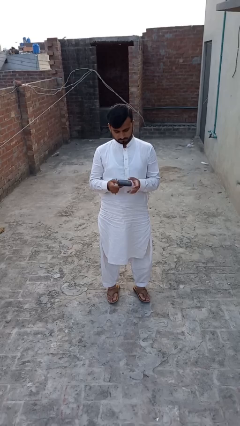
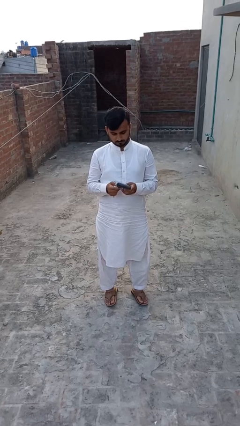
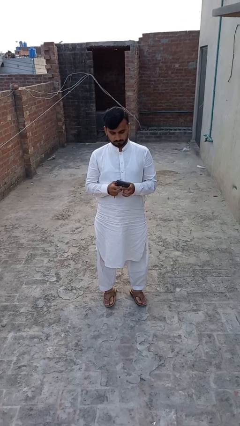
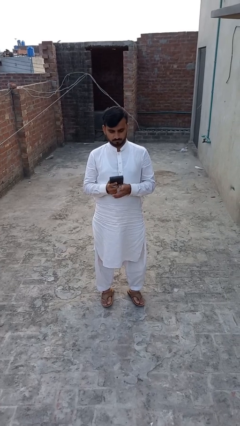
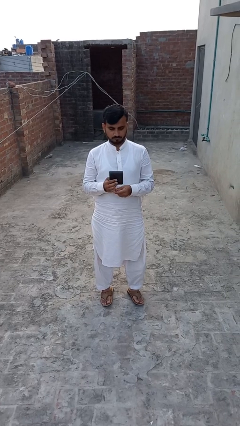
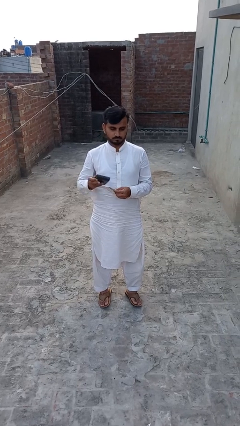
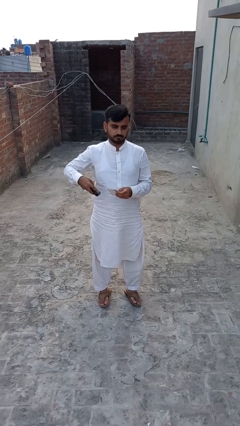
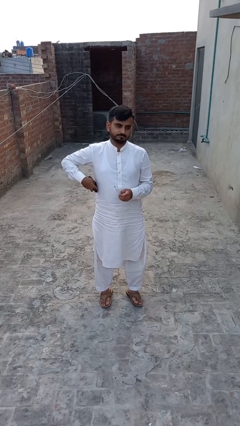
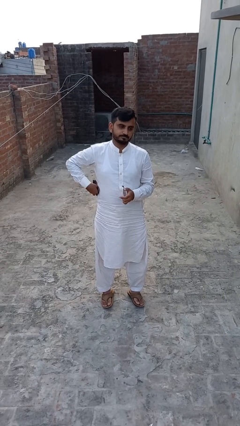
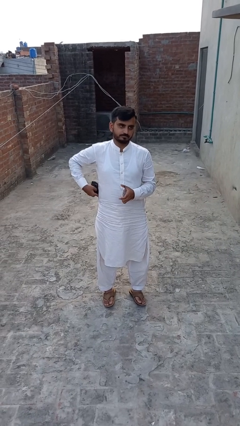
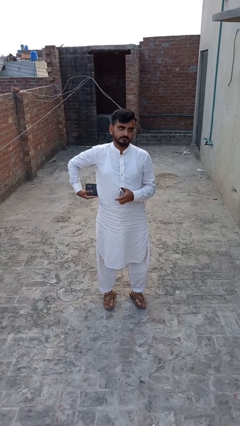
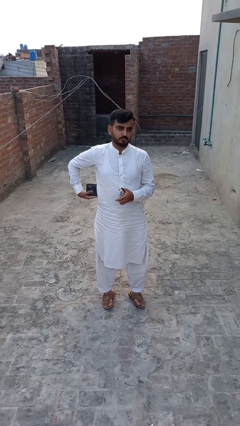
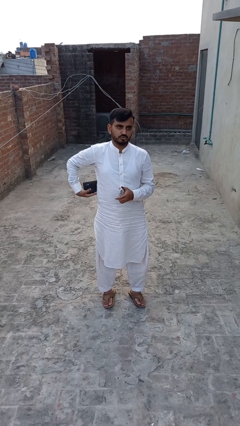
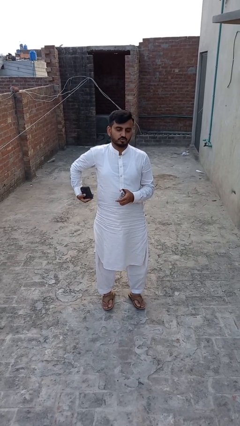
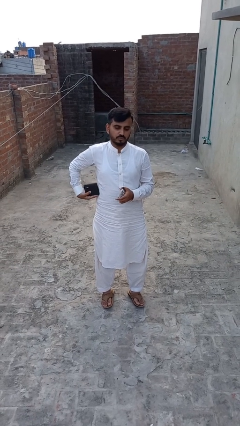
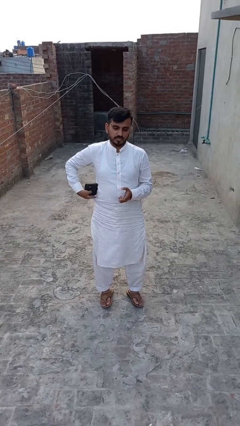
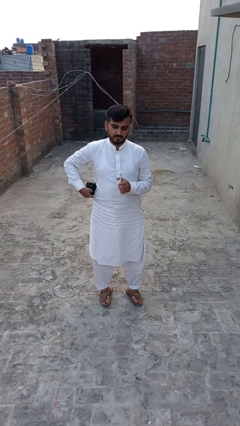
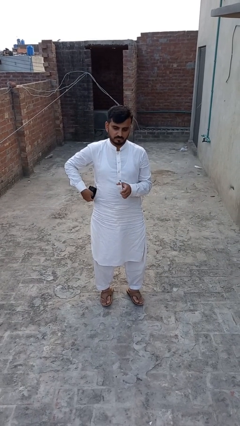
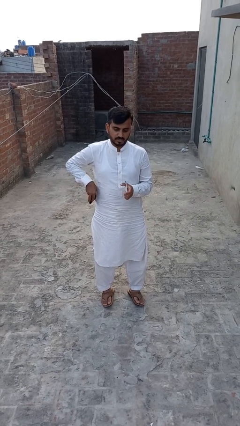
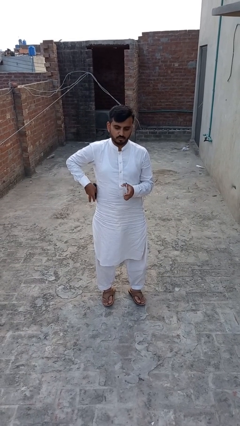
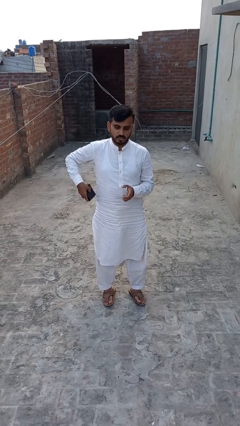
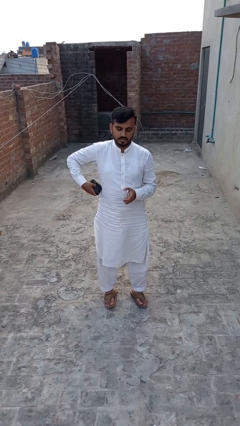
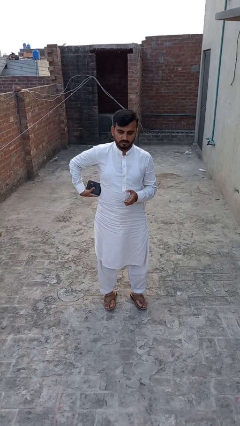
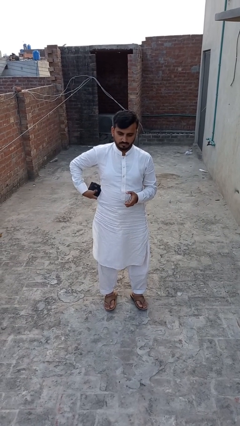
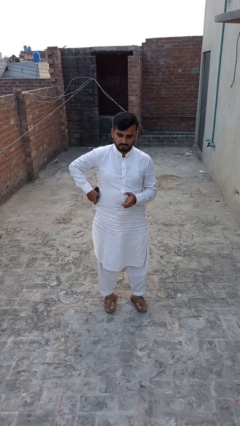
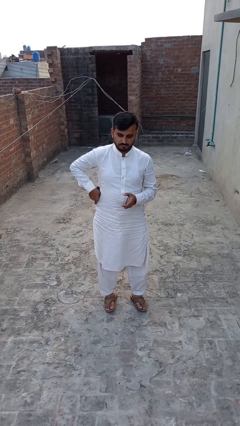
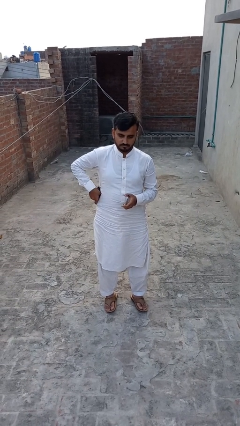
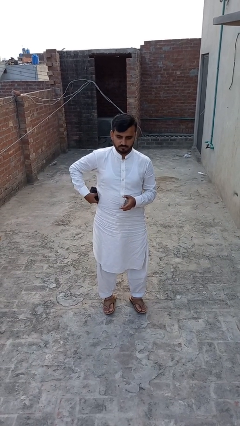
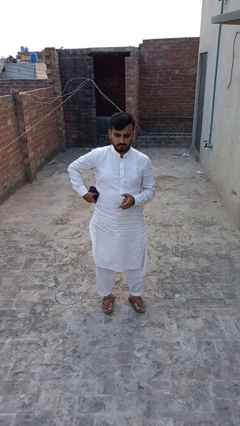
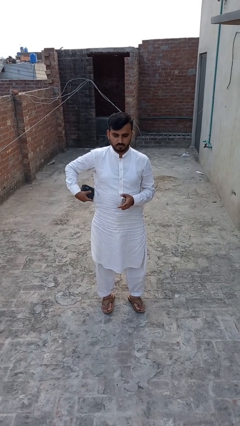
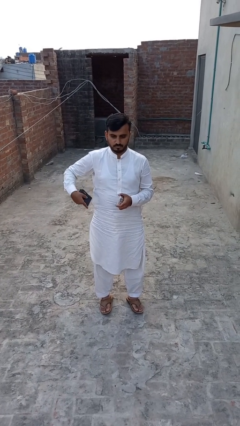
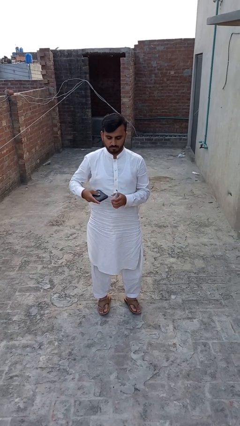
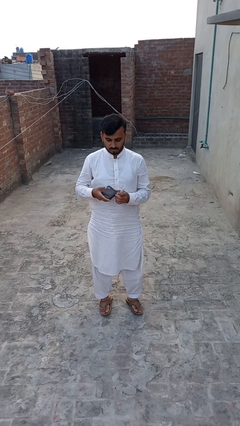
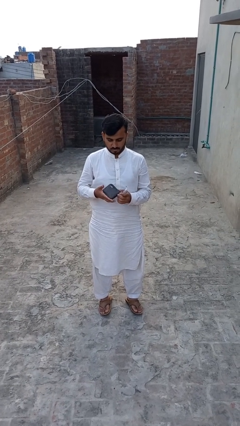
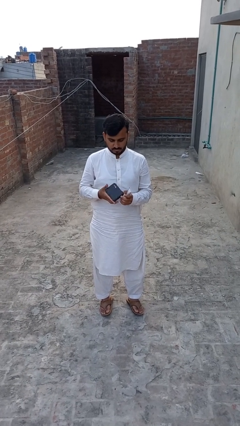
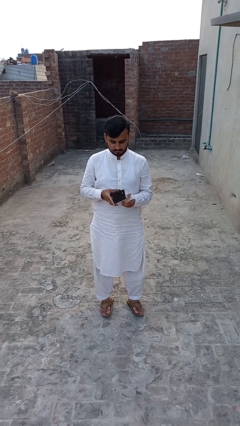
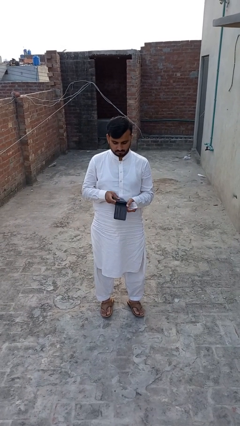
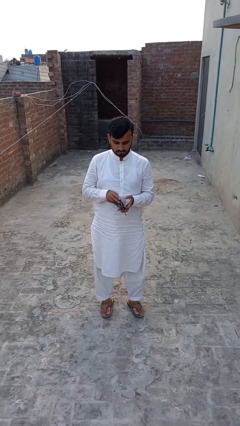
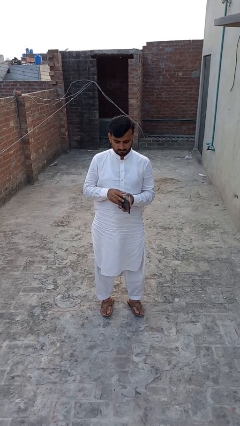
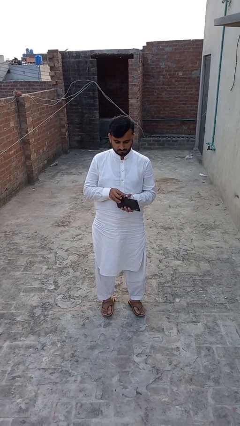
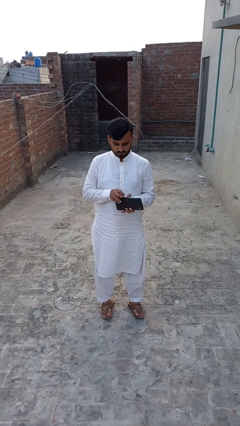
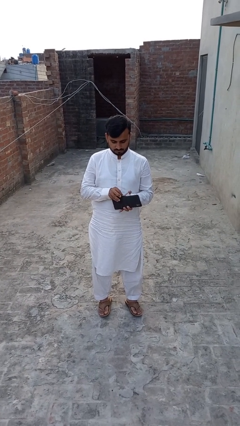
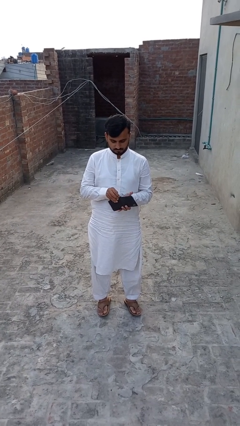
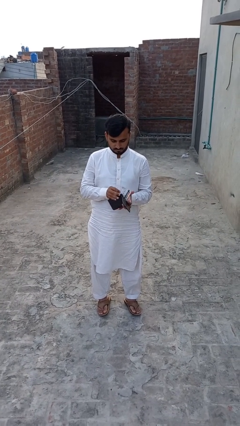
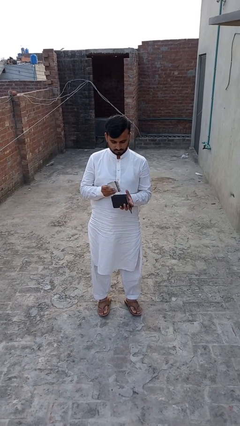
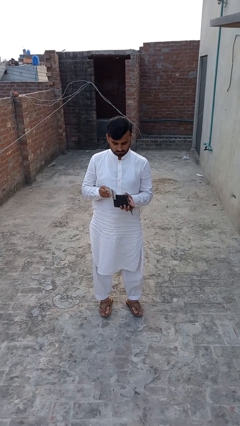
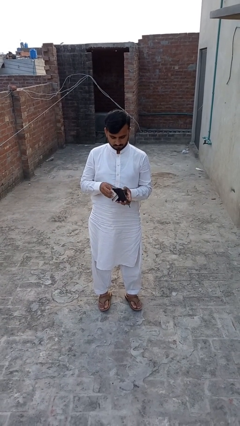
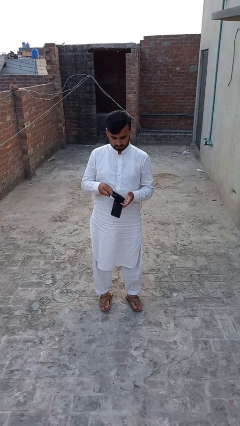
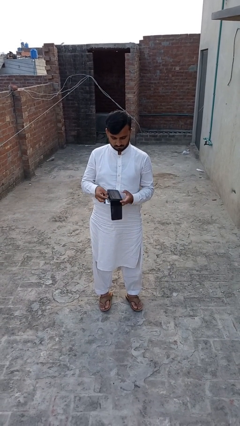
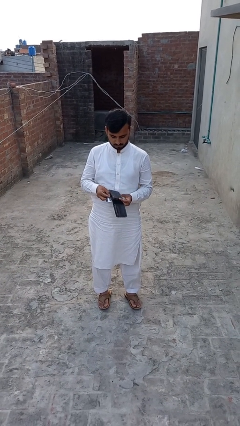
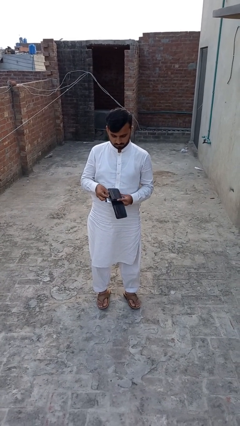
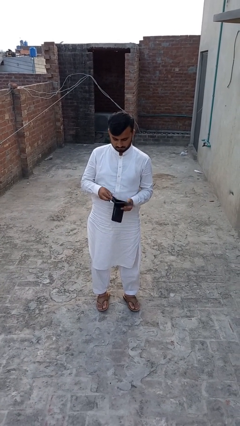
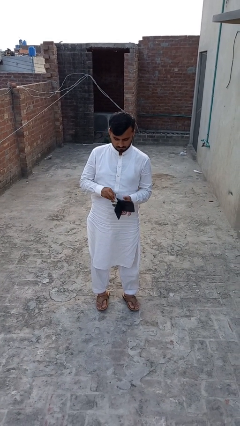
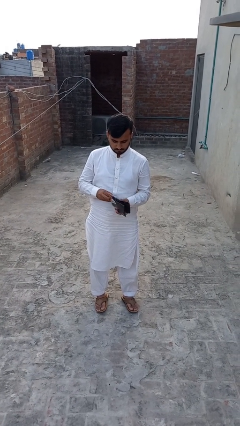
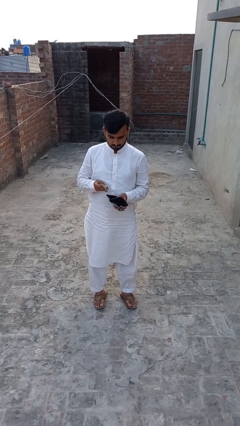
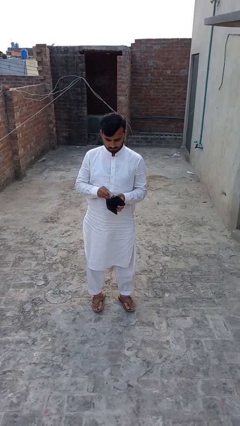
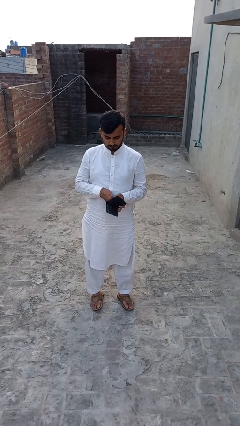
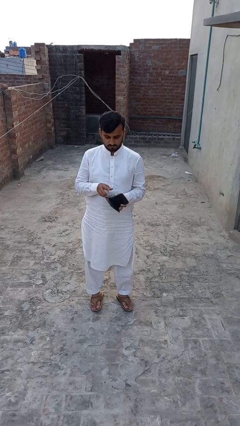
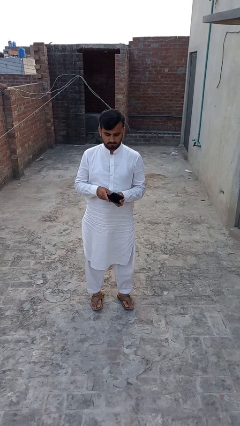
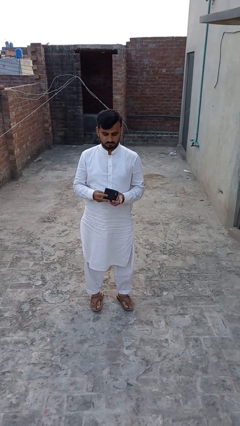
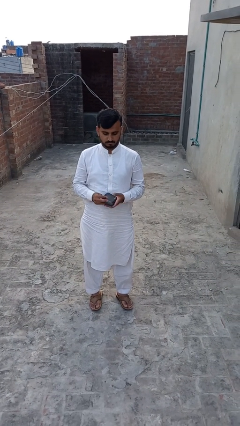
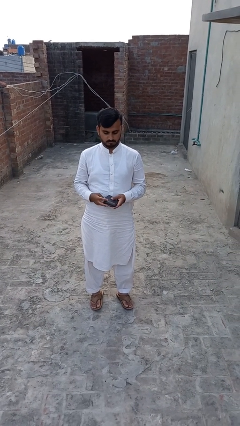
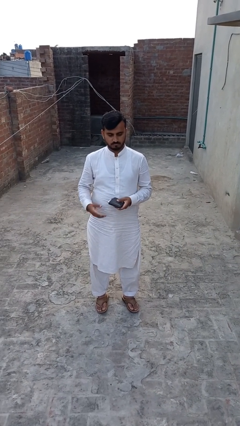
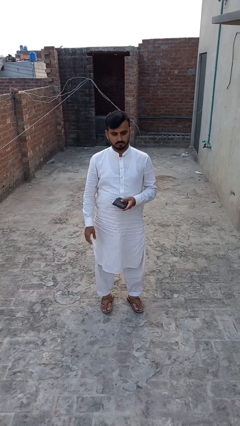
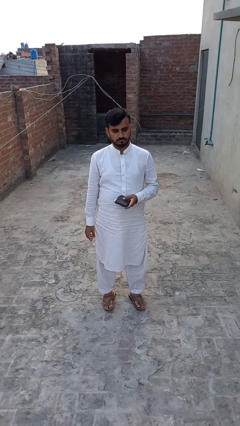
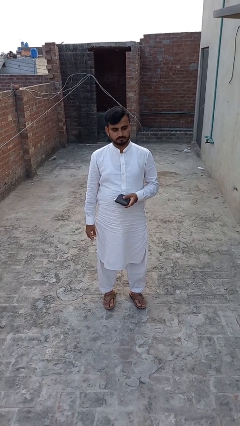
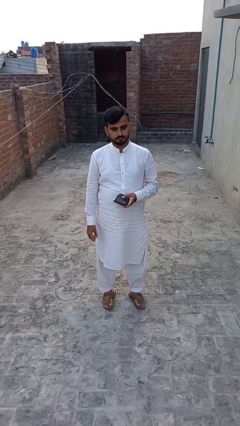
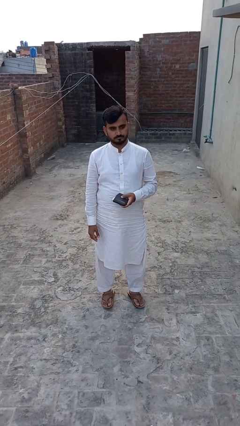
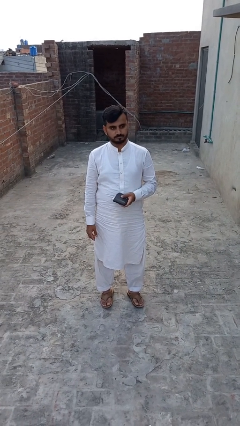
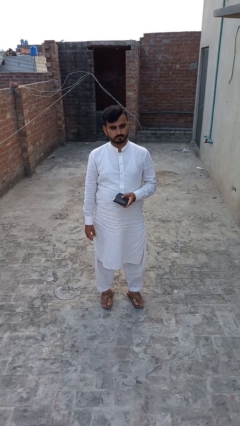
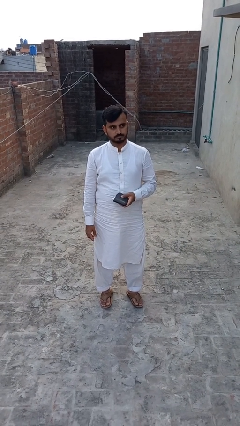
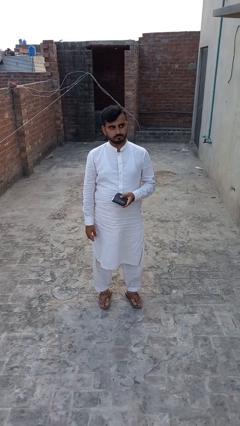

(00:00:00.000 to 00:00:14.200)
person puts object into purse

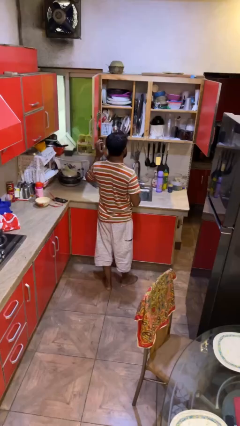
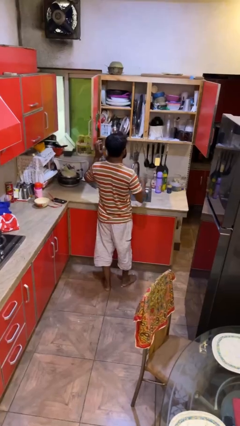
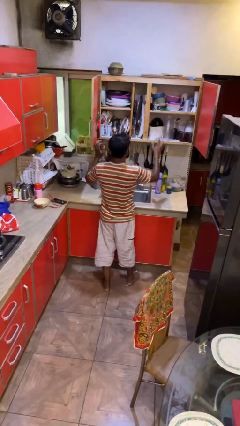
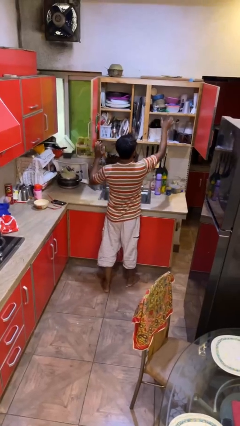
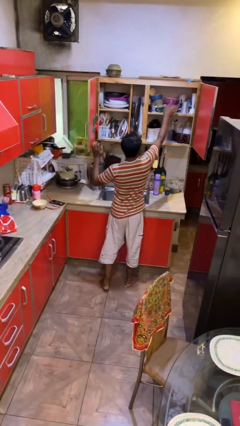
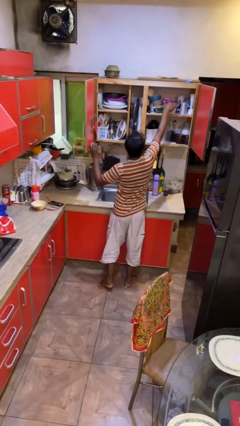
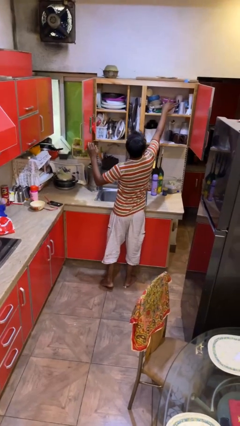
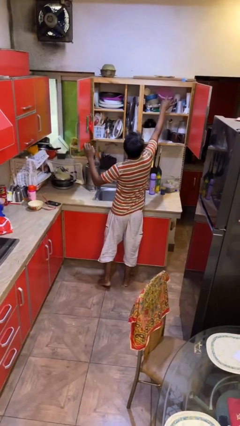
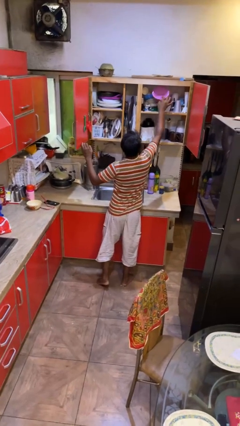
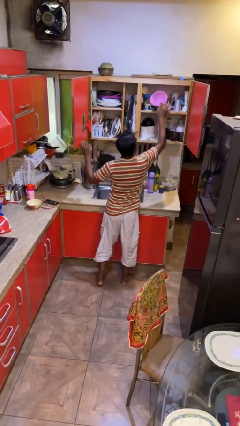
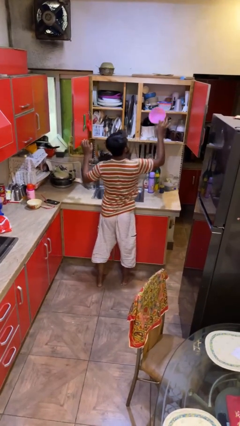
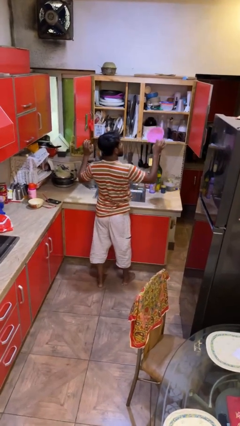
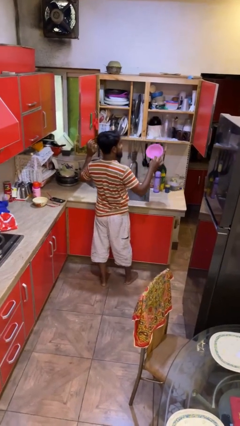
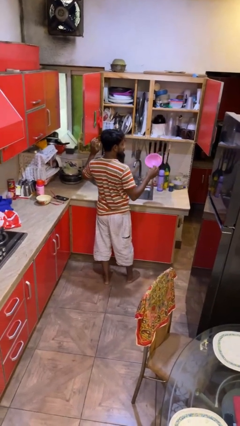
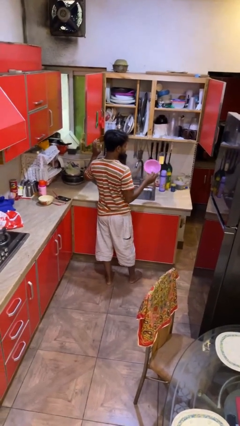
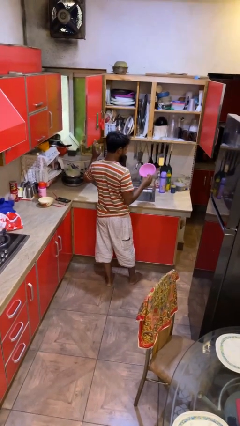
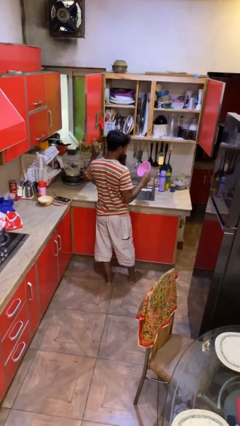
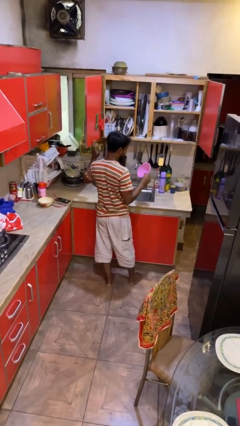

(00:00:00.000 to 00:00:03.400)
person picks up object from cabinet

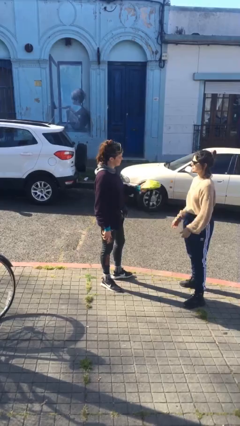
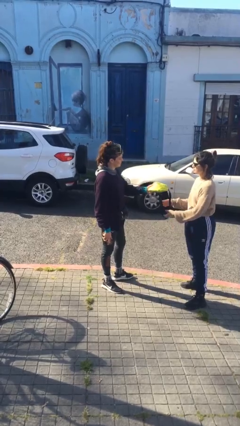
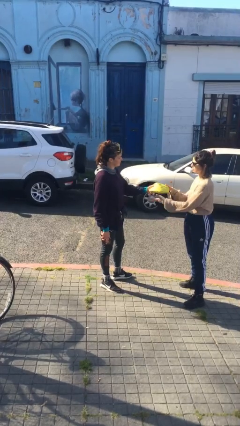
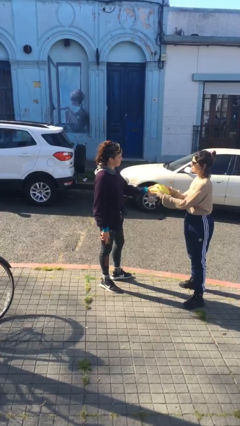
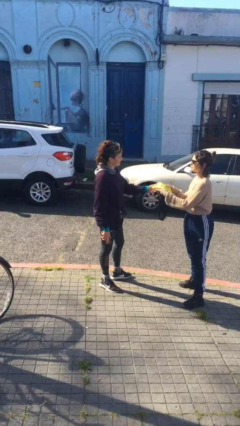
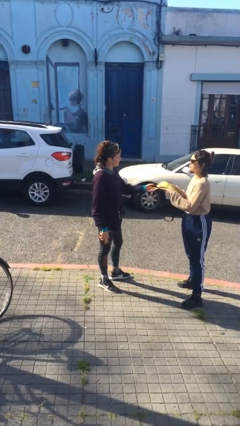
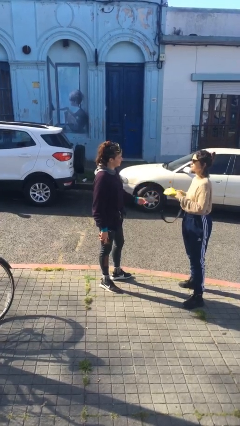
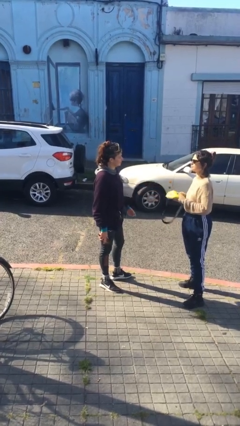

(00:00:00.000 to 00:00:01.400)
person transfers object to person
